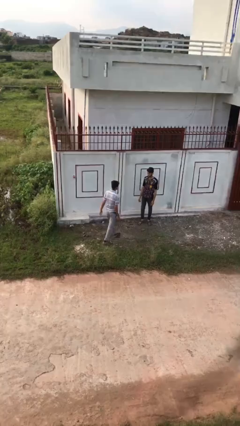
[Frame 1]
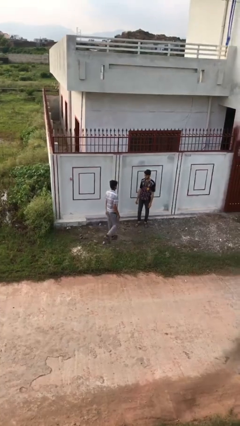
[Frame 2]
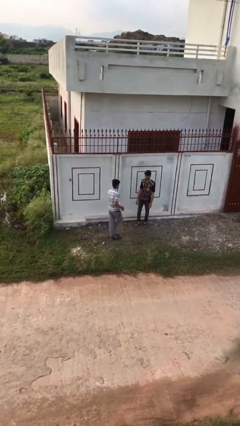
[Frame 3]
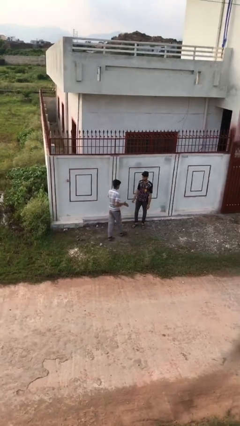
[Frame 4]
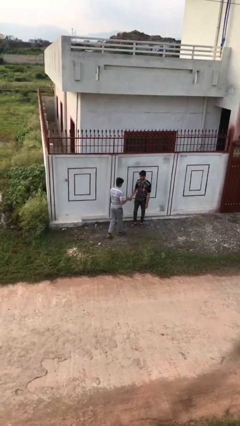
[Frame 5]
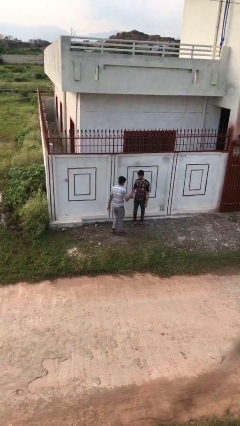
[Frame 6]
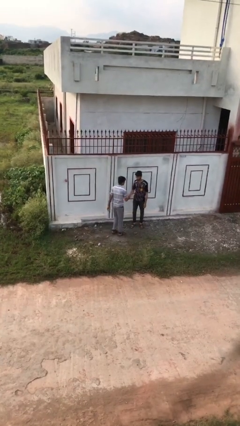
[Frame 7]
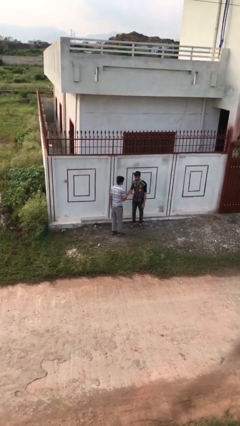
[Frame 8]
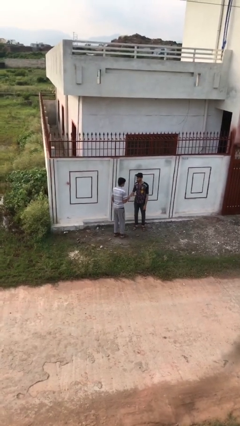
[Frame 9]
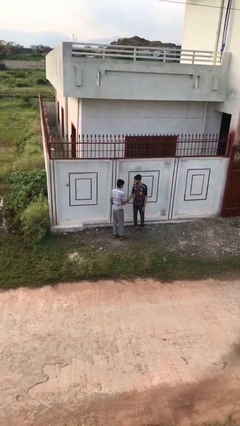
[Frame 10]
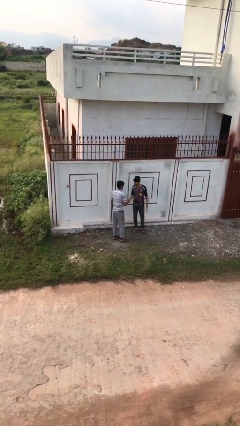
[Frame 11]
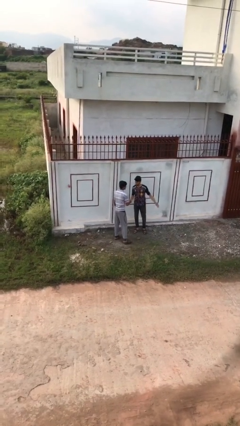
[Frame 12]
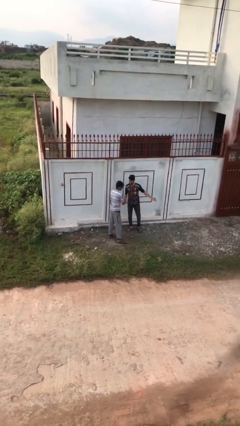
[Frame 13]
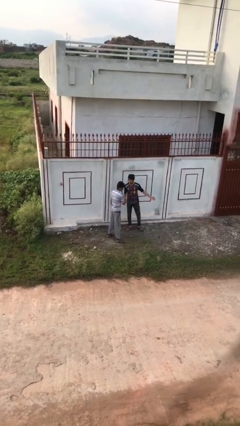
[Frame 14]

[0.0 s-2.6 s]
person shakes hand

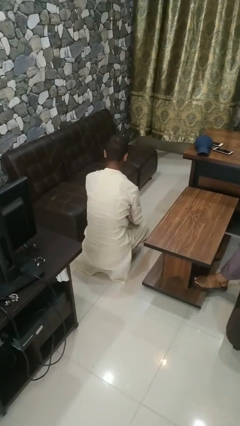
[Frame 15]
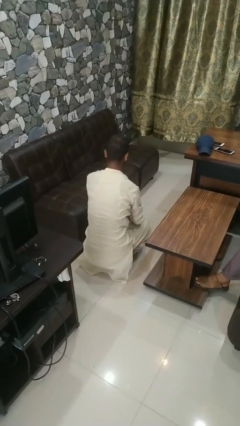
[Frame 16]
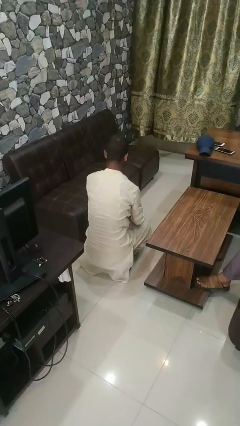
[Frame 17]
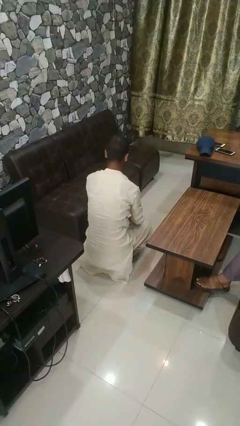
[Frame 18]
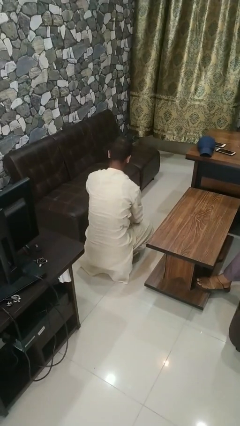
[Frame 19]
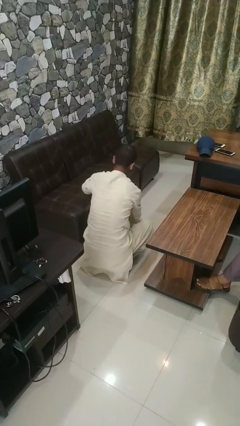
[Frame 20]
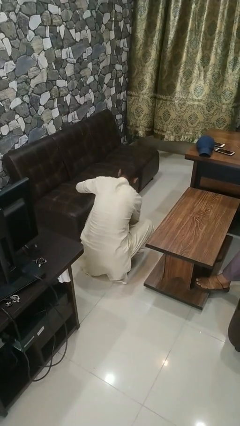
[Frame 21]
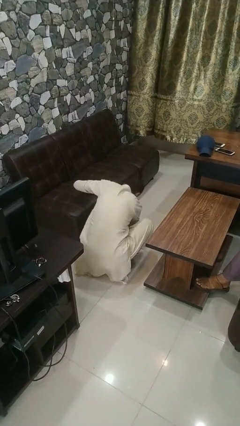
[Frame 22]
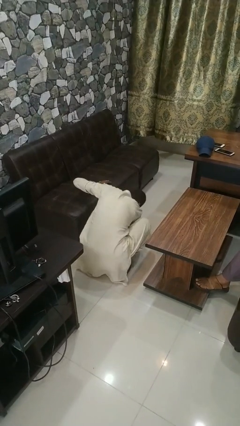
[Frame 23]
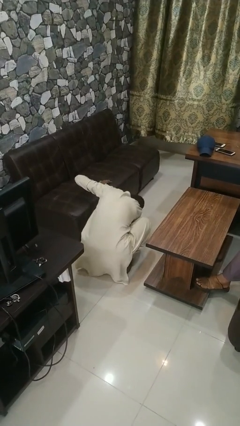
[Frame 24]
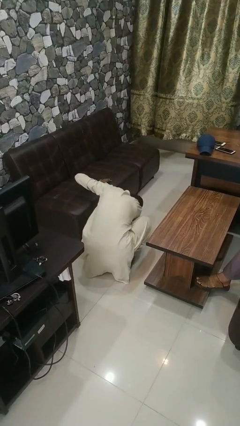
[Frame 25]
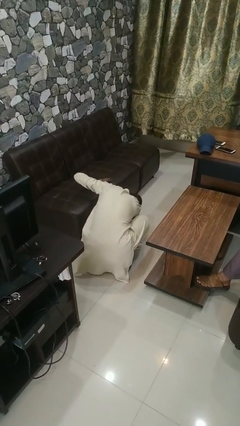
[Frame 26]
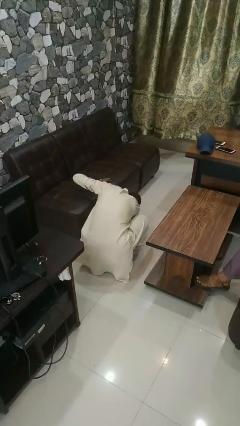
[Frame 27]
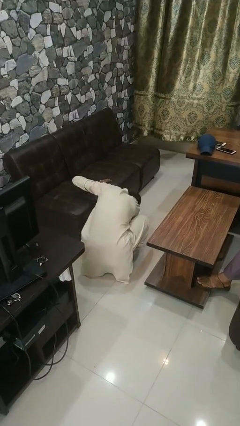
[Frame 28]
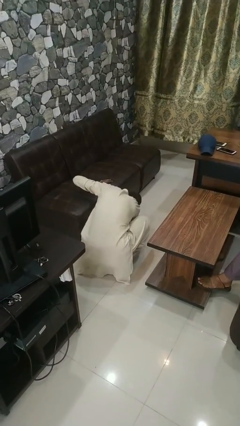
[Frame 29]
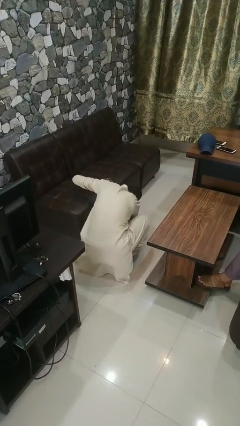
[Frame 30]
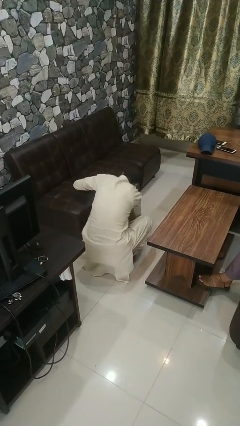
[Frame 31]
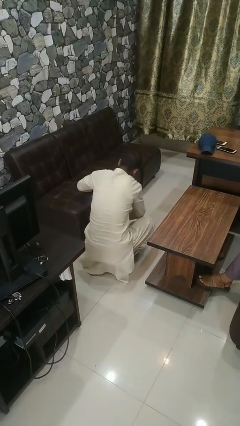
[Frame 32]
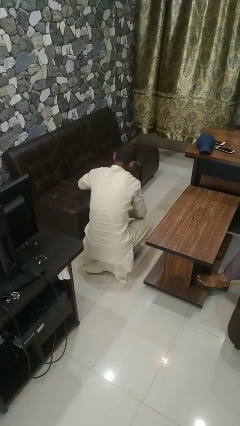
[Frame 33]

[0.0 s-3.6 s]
person searches under couch

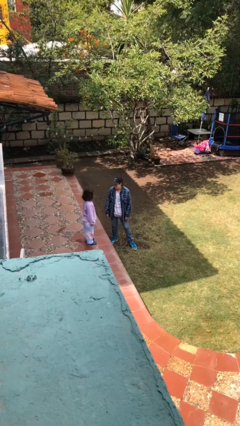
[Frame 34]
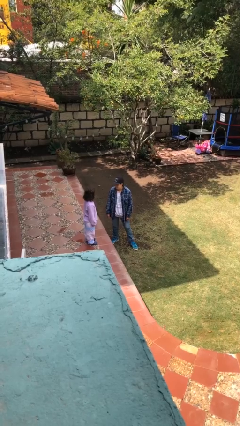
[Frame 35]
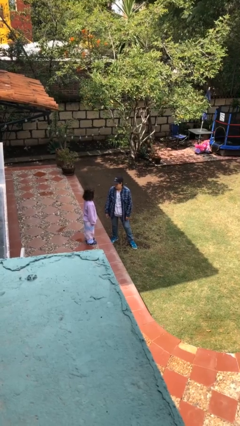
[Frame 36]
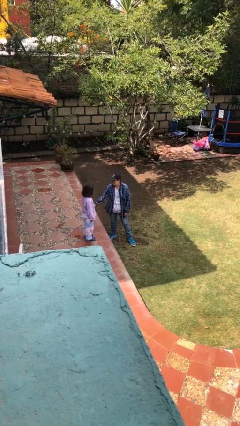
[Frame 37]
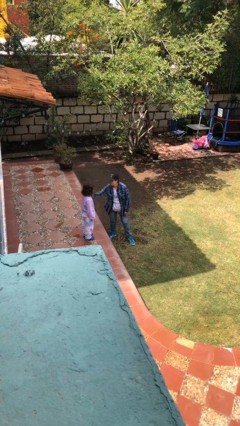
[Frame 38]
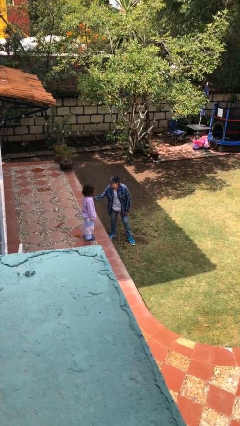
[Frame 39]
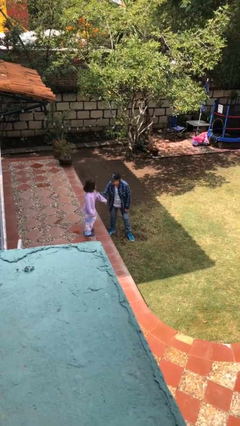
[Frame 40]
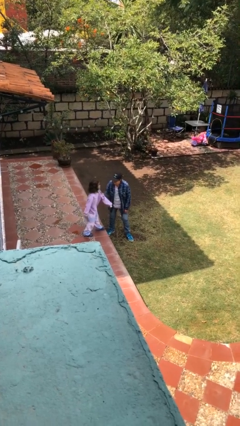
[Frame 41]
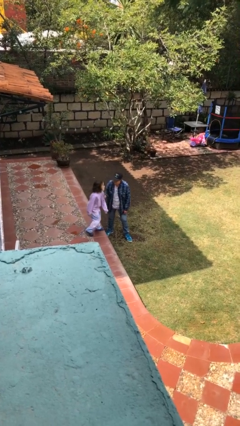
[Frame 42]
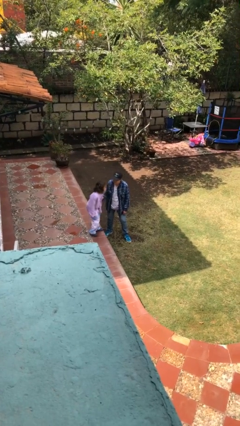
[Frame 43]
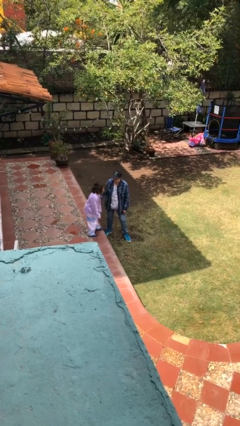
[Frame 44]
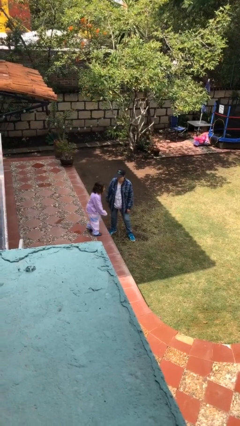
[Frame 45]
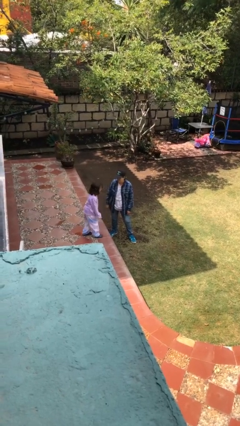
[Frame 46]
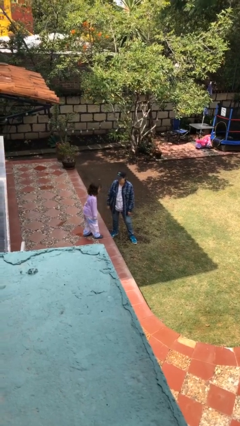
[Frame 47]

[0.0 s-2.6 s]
person grabs person by bicep

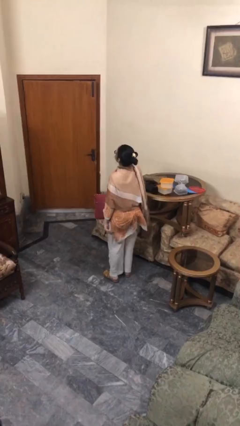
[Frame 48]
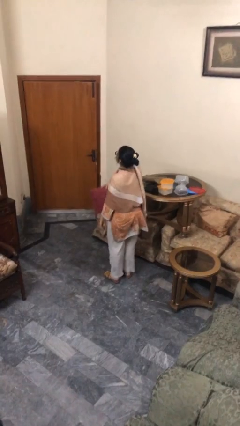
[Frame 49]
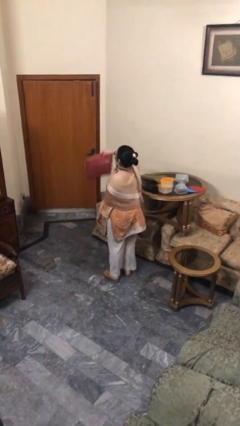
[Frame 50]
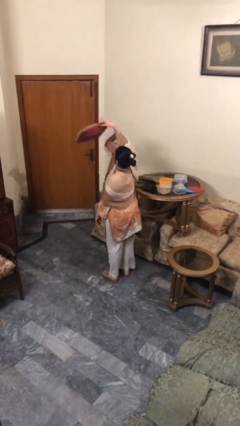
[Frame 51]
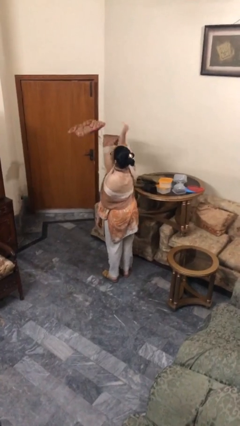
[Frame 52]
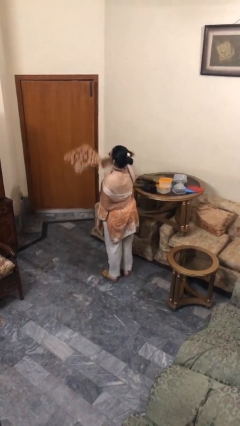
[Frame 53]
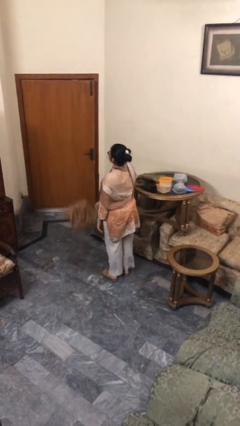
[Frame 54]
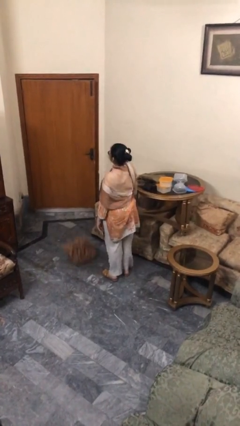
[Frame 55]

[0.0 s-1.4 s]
person drops object

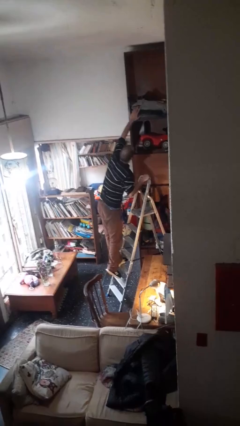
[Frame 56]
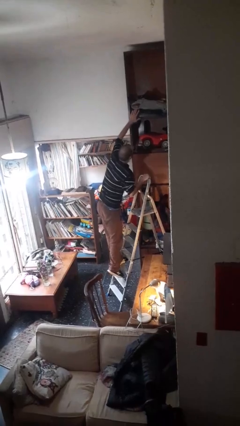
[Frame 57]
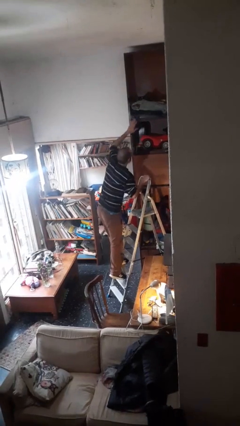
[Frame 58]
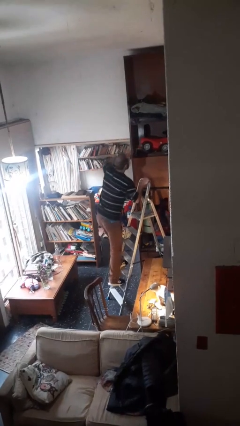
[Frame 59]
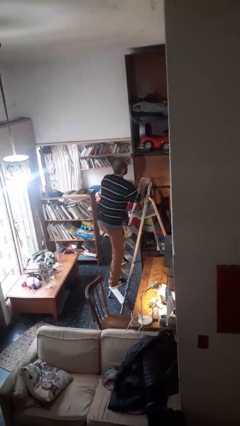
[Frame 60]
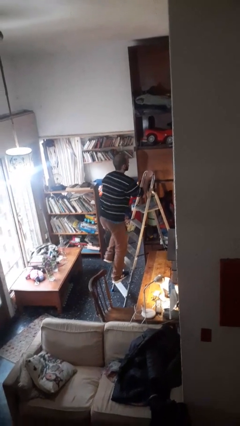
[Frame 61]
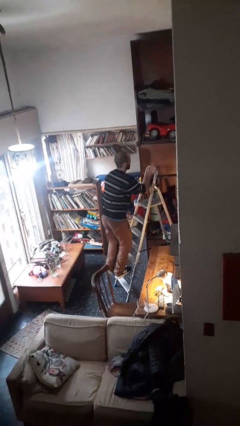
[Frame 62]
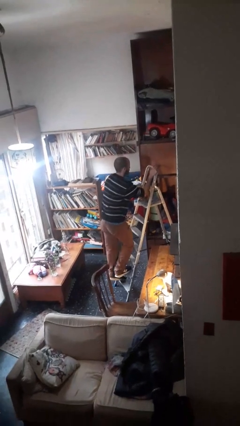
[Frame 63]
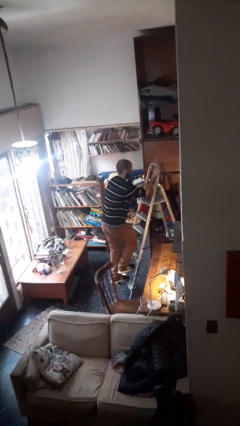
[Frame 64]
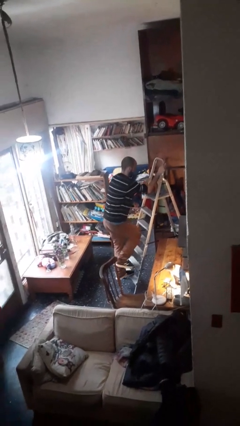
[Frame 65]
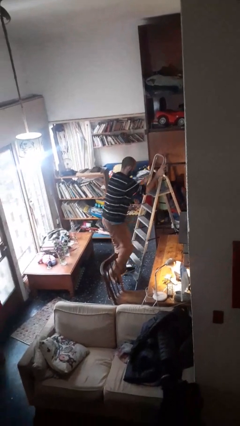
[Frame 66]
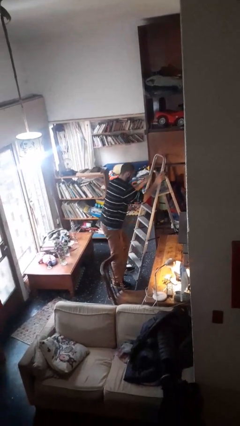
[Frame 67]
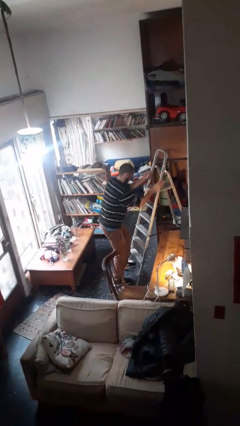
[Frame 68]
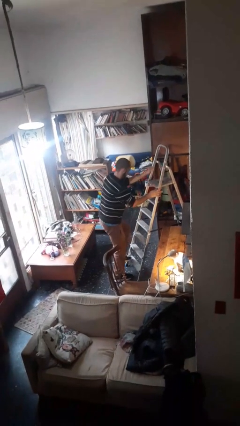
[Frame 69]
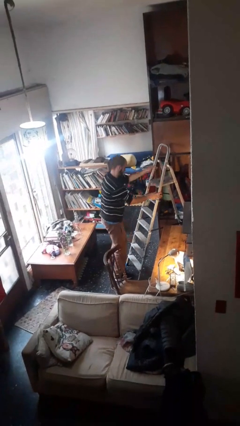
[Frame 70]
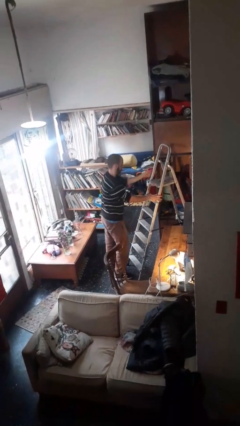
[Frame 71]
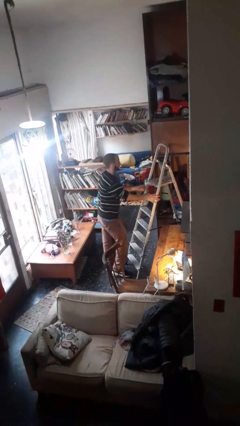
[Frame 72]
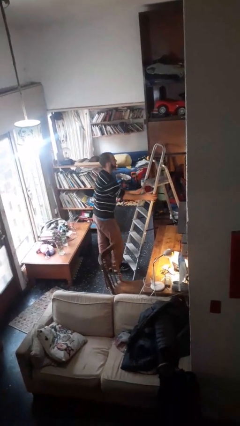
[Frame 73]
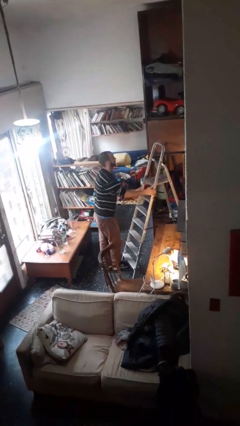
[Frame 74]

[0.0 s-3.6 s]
person climbs down ladder

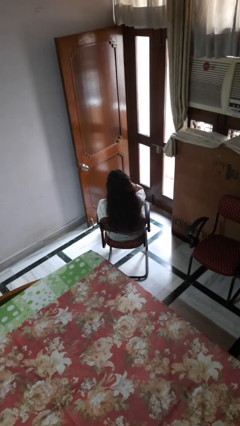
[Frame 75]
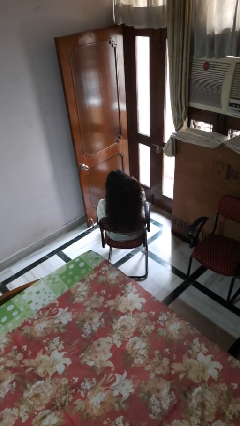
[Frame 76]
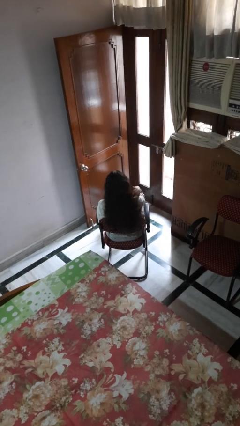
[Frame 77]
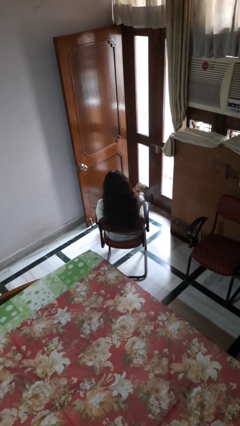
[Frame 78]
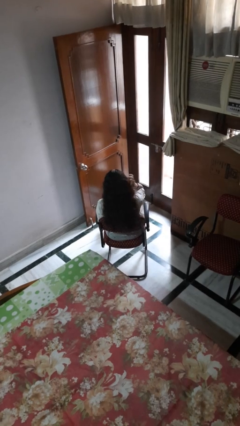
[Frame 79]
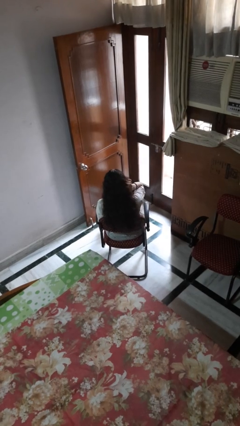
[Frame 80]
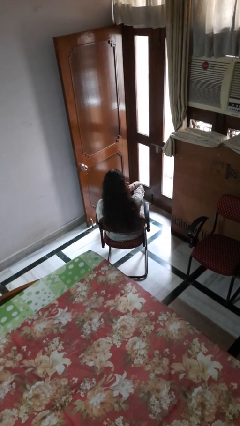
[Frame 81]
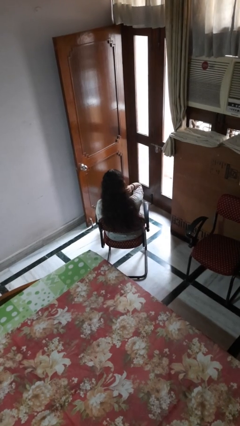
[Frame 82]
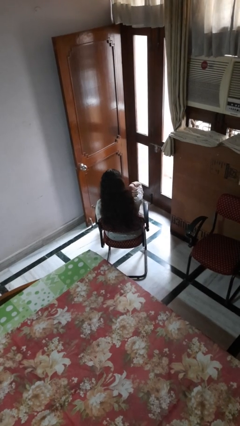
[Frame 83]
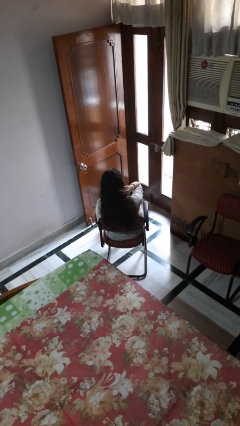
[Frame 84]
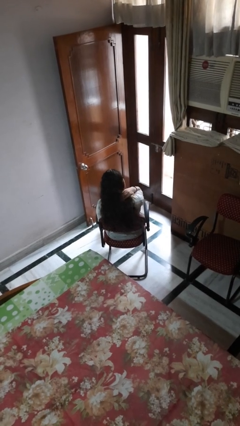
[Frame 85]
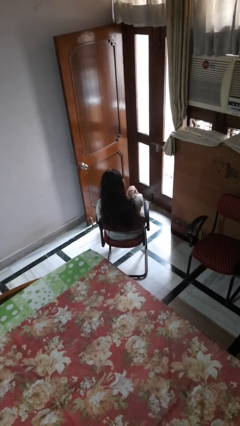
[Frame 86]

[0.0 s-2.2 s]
person strokes hair

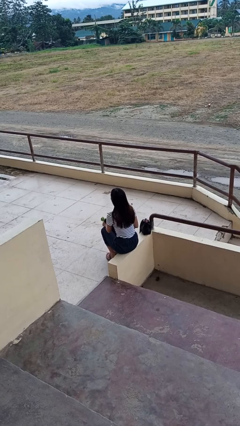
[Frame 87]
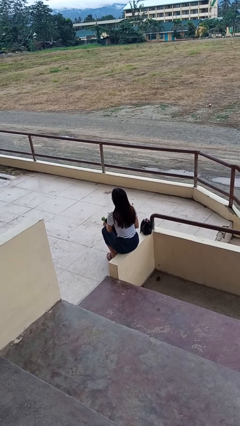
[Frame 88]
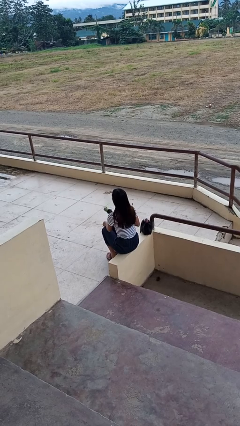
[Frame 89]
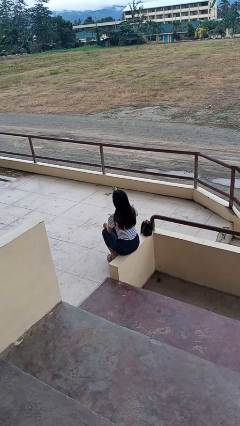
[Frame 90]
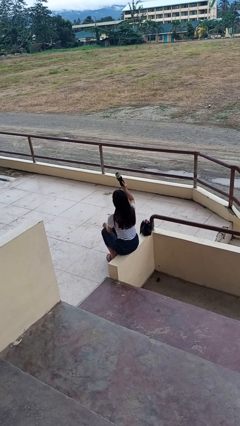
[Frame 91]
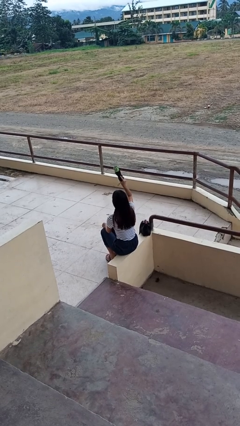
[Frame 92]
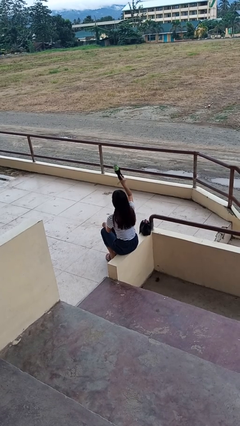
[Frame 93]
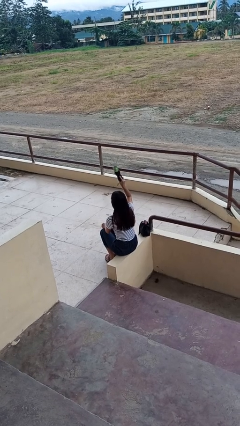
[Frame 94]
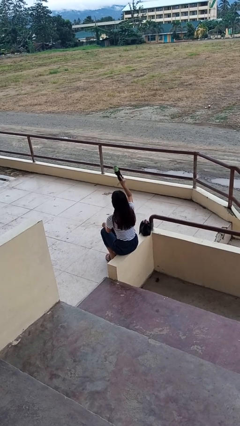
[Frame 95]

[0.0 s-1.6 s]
person holds object above head
